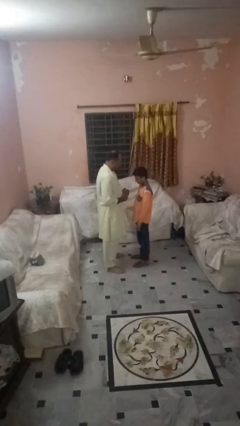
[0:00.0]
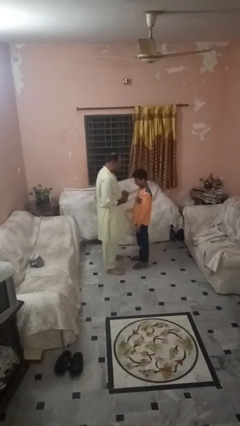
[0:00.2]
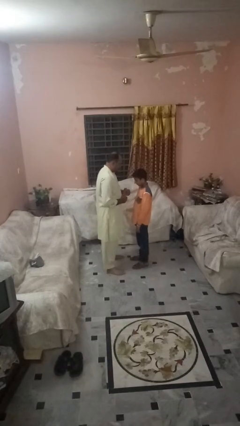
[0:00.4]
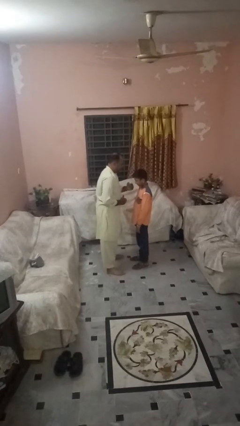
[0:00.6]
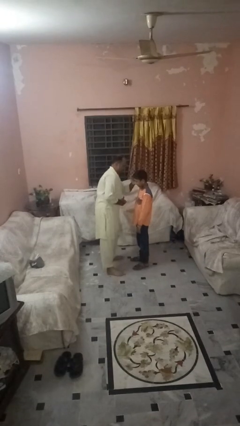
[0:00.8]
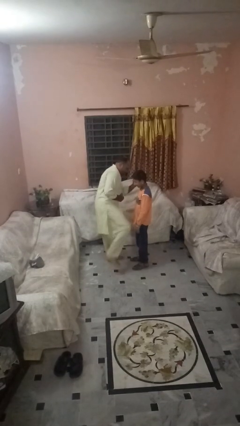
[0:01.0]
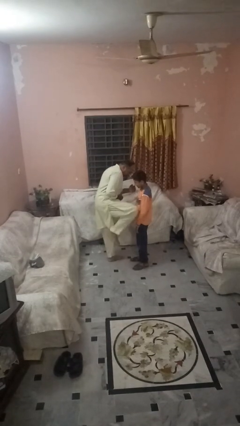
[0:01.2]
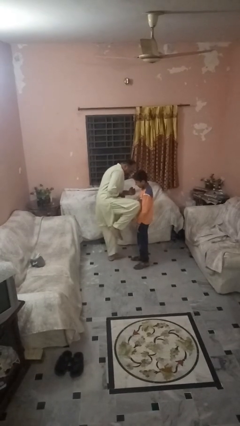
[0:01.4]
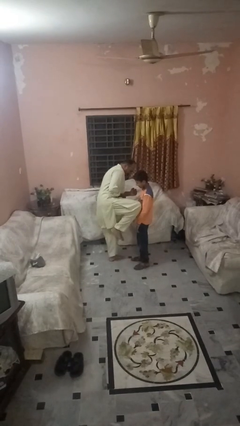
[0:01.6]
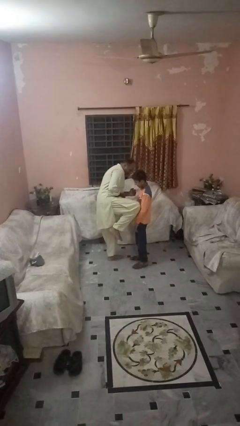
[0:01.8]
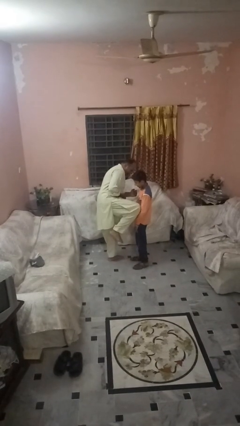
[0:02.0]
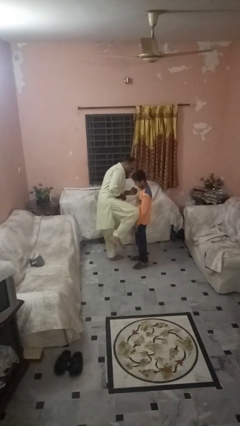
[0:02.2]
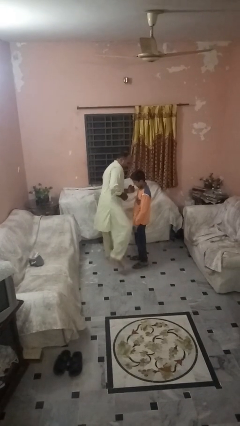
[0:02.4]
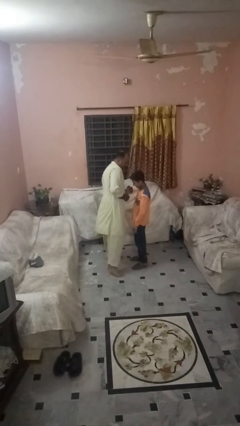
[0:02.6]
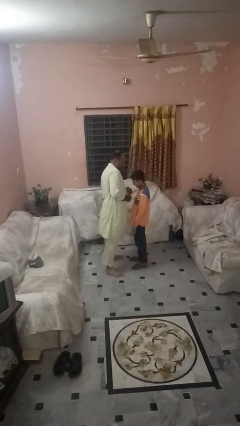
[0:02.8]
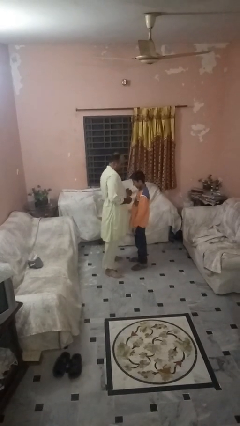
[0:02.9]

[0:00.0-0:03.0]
person kicks object to person

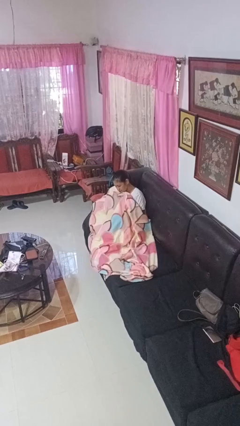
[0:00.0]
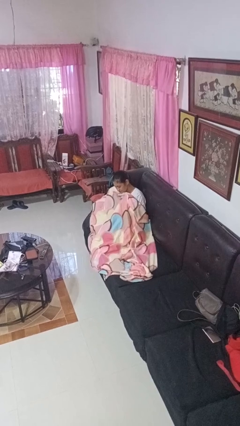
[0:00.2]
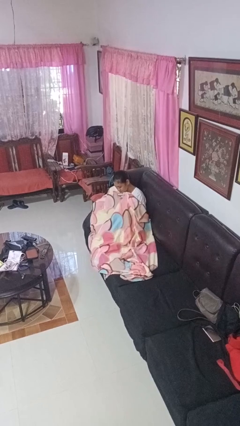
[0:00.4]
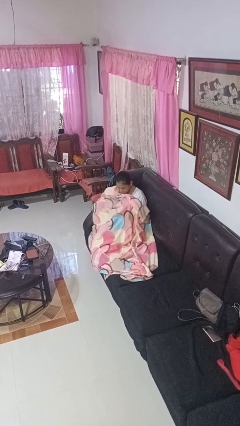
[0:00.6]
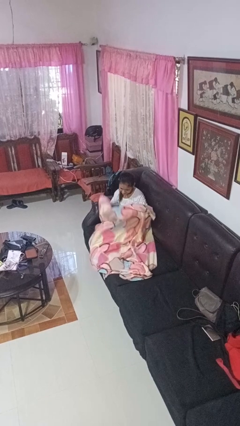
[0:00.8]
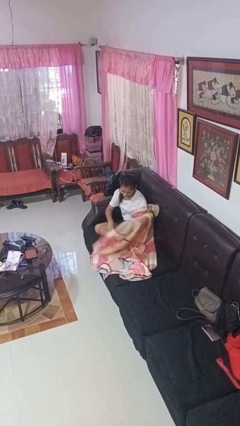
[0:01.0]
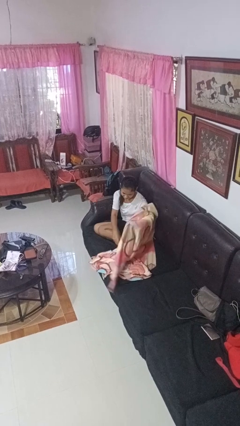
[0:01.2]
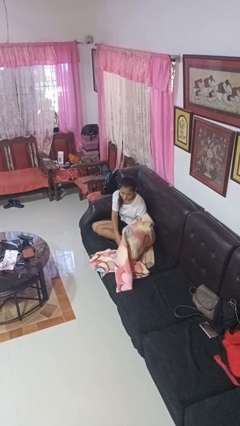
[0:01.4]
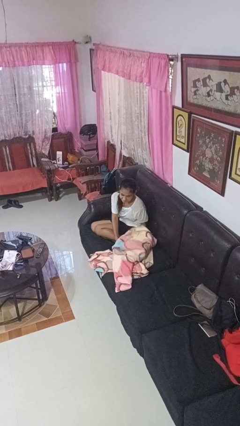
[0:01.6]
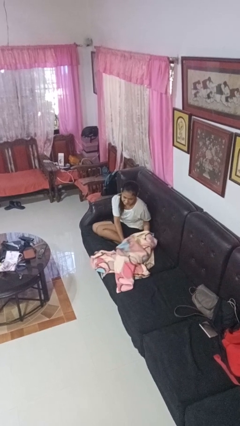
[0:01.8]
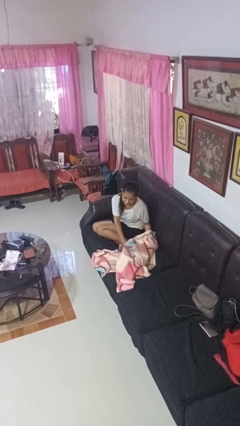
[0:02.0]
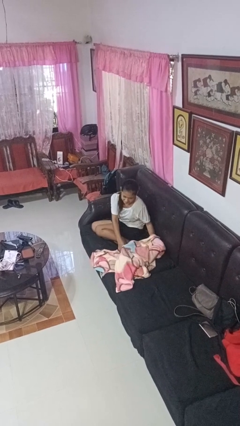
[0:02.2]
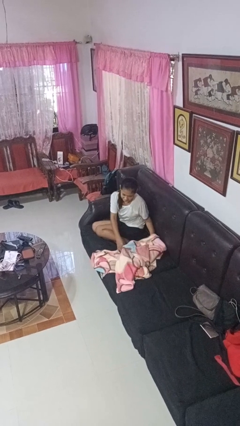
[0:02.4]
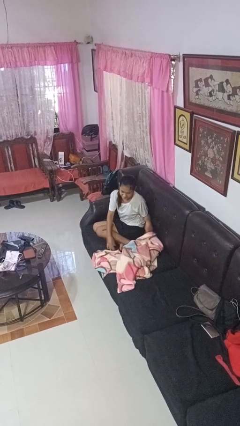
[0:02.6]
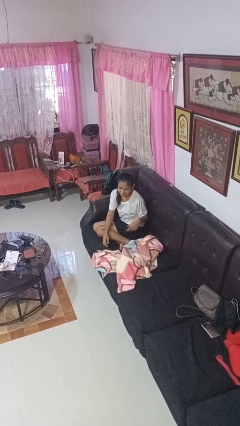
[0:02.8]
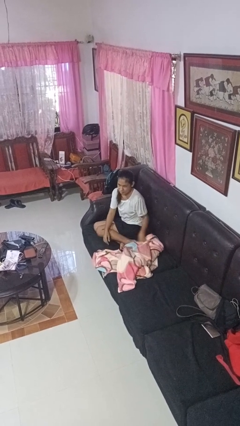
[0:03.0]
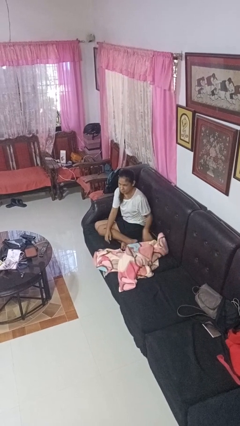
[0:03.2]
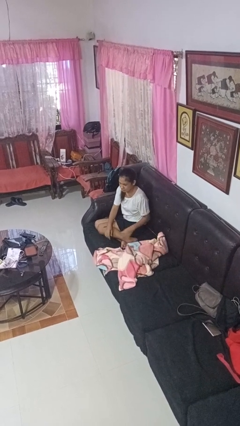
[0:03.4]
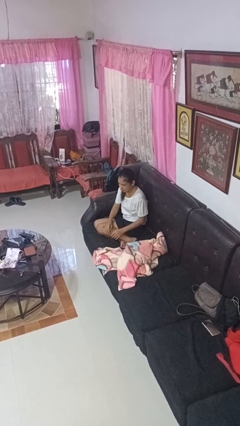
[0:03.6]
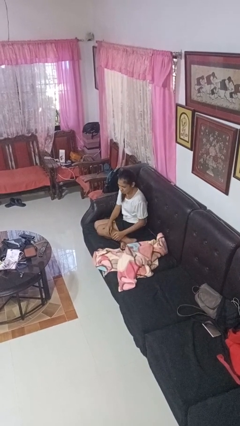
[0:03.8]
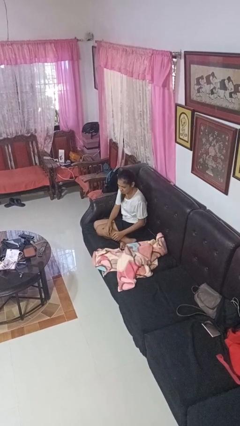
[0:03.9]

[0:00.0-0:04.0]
person uncovers with blanket

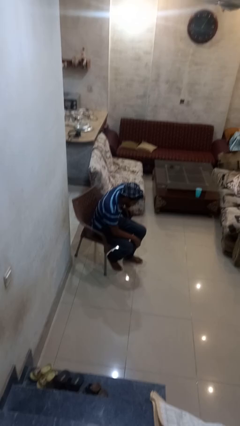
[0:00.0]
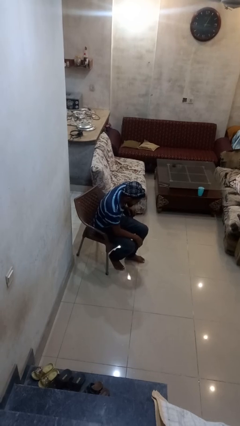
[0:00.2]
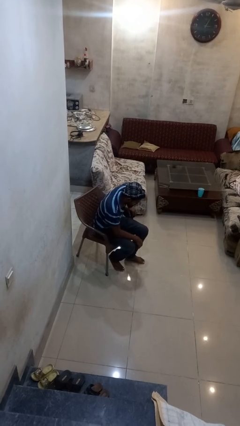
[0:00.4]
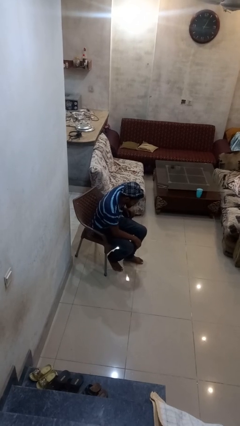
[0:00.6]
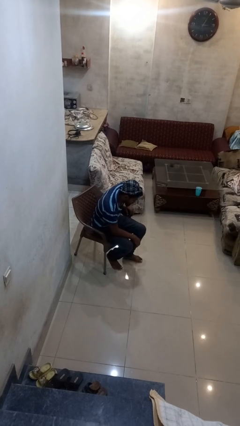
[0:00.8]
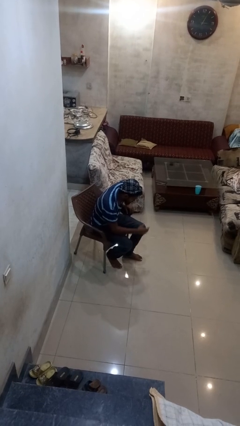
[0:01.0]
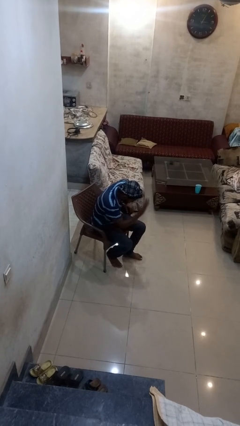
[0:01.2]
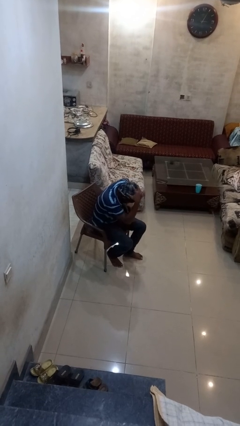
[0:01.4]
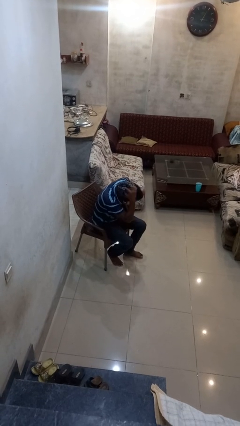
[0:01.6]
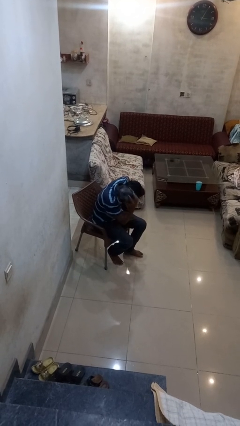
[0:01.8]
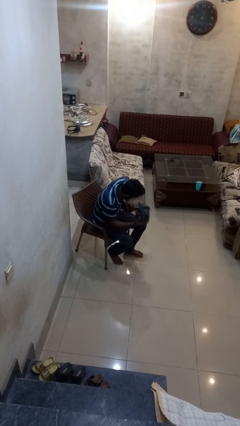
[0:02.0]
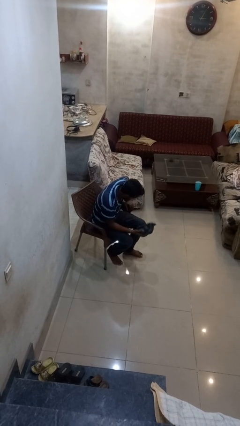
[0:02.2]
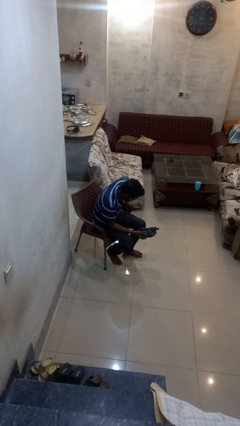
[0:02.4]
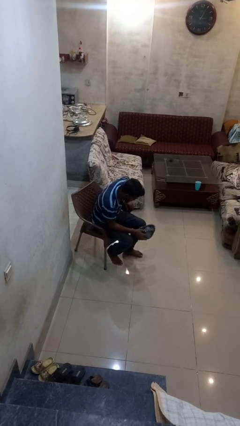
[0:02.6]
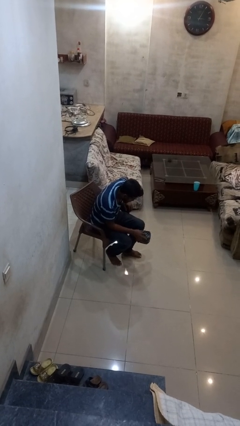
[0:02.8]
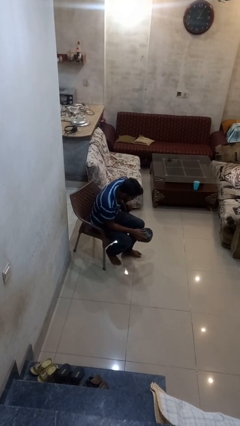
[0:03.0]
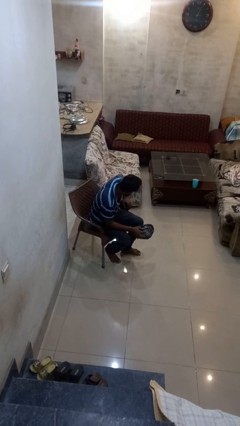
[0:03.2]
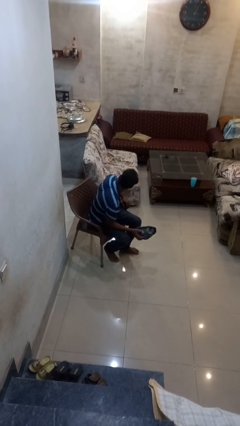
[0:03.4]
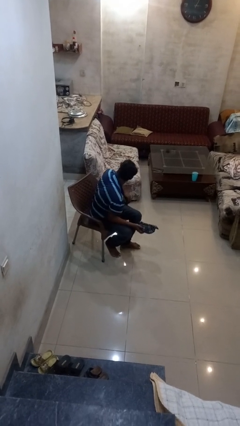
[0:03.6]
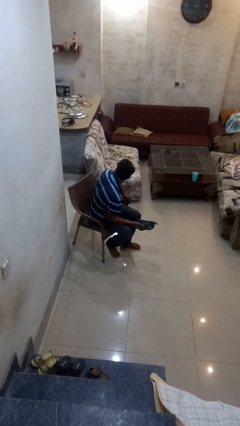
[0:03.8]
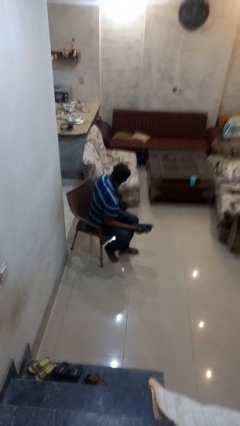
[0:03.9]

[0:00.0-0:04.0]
person takes off hat

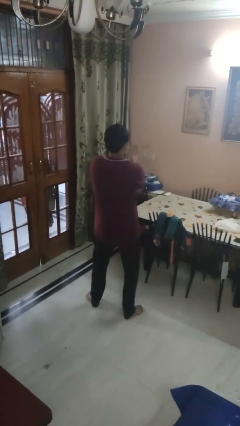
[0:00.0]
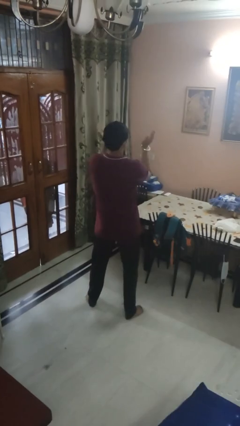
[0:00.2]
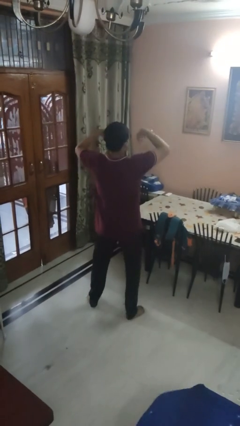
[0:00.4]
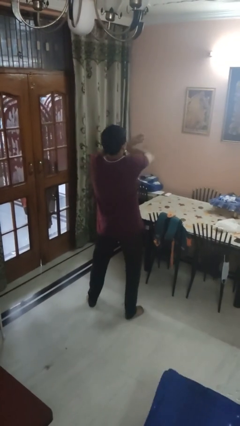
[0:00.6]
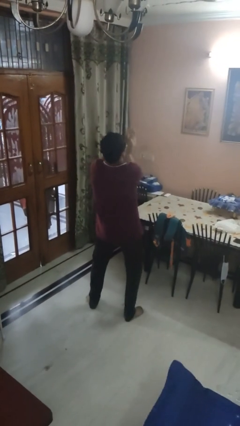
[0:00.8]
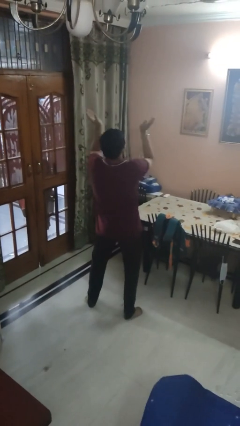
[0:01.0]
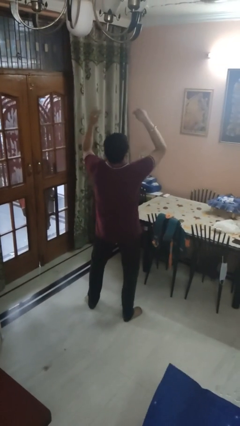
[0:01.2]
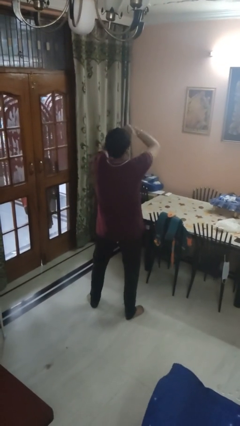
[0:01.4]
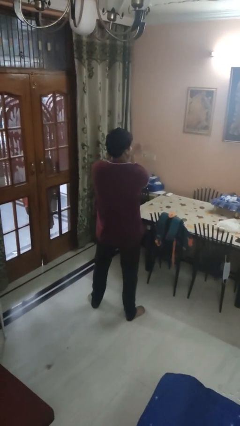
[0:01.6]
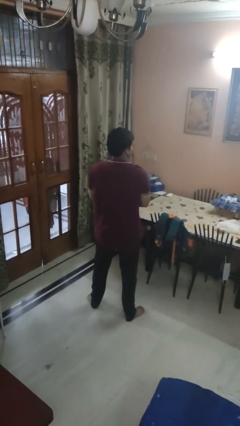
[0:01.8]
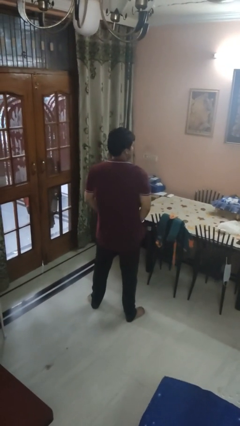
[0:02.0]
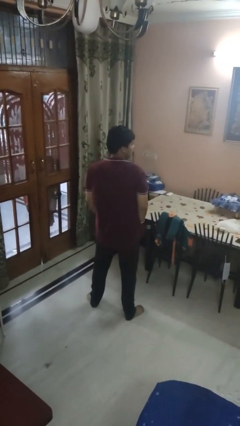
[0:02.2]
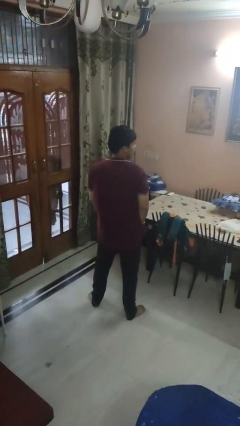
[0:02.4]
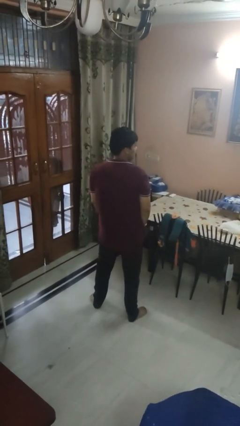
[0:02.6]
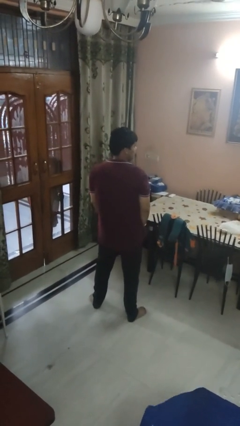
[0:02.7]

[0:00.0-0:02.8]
person dances in place

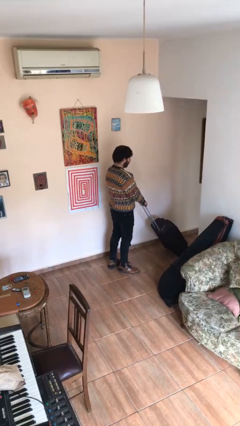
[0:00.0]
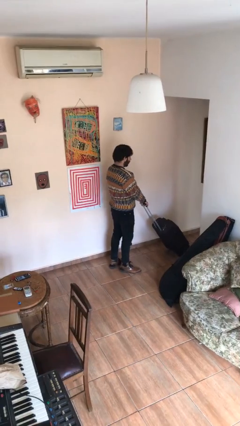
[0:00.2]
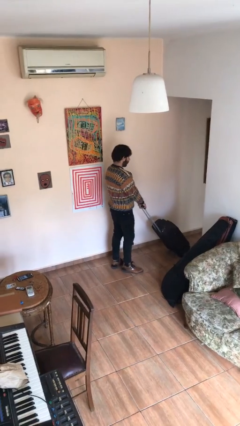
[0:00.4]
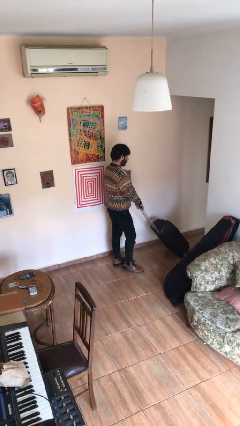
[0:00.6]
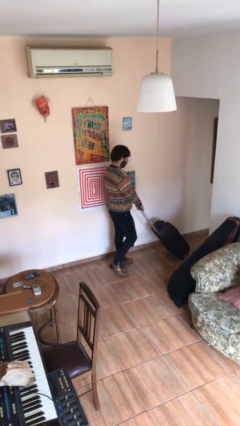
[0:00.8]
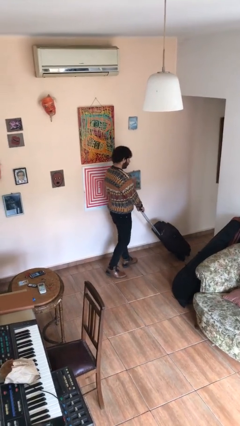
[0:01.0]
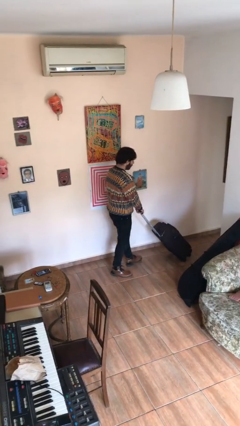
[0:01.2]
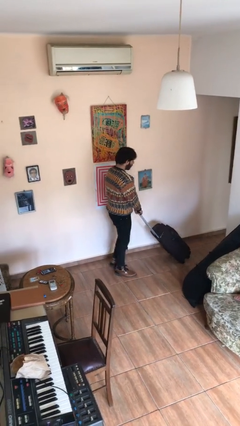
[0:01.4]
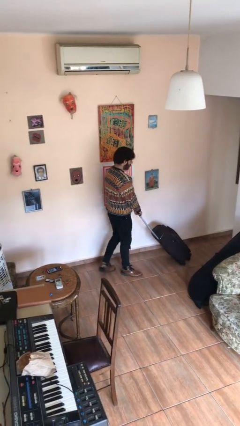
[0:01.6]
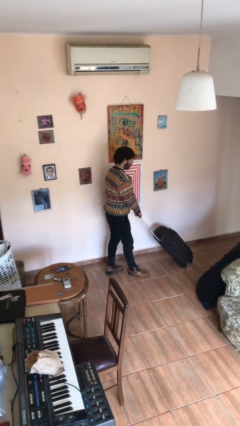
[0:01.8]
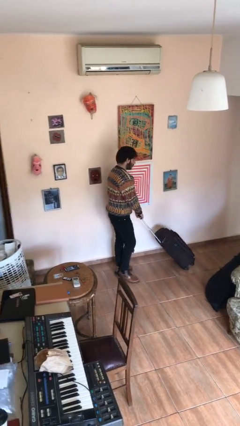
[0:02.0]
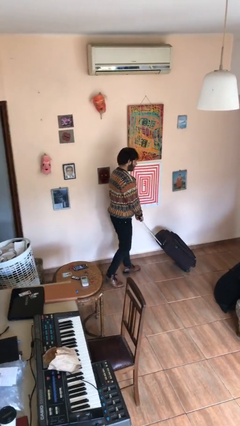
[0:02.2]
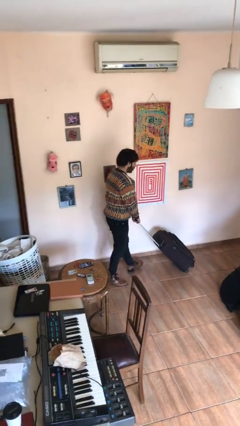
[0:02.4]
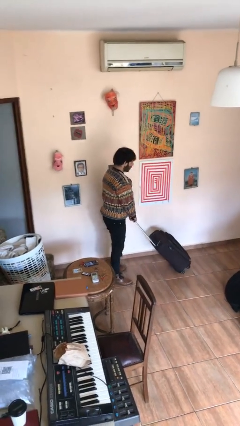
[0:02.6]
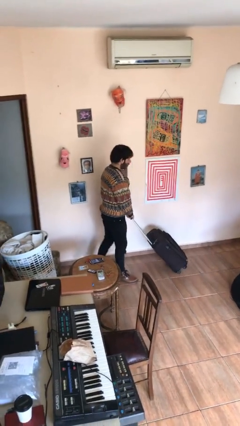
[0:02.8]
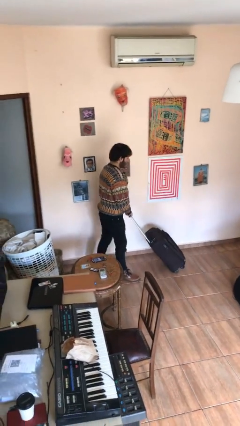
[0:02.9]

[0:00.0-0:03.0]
person pulls wheeled cart

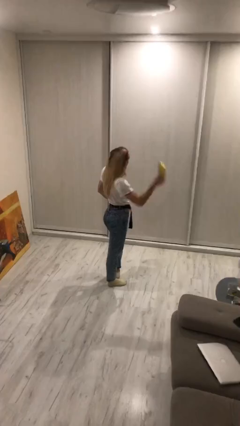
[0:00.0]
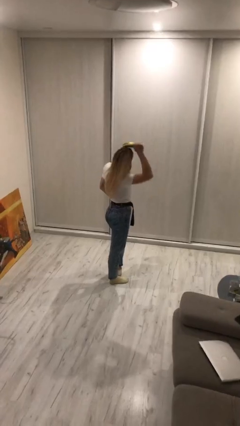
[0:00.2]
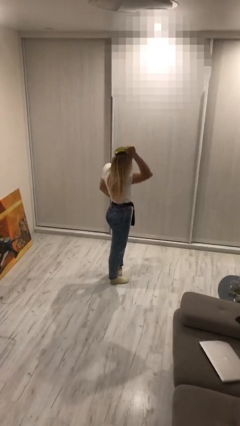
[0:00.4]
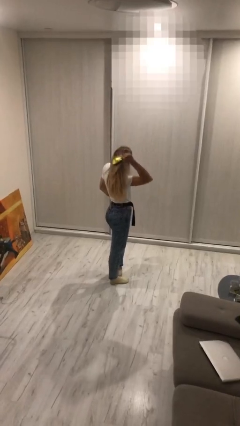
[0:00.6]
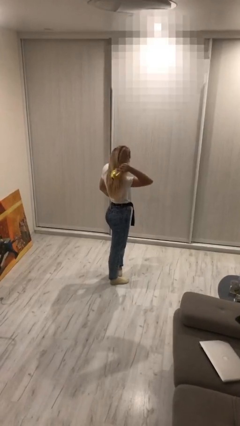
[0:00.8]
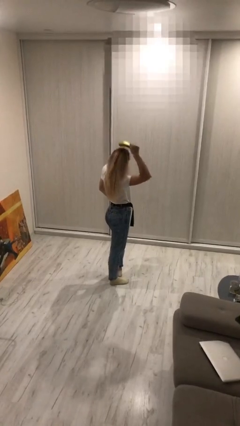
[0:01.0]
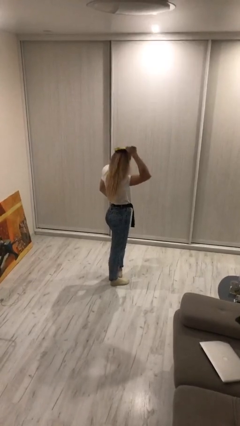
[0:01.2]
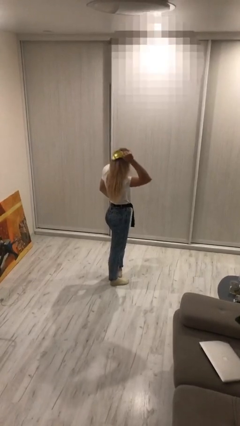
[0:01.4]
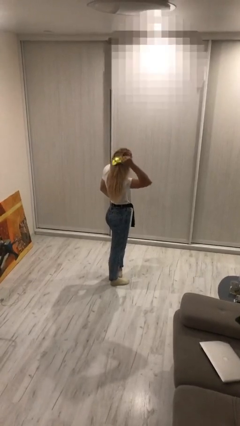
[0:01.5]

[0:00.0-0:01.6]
person brushes hair
